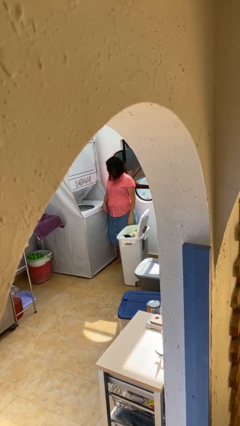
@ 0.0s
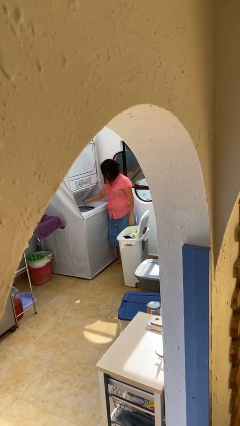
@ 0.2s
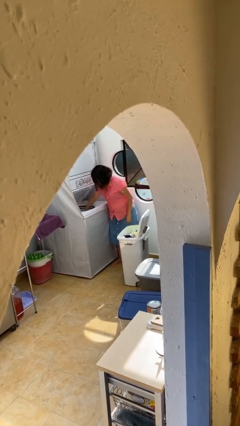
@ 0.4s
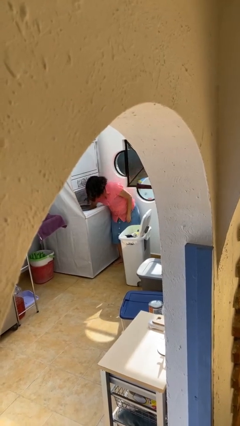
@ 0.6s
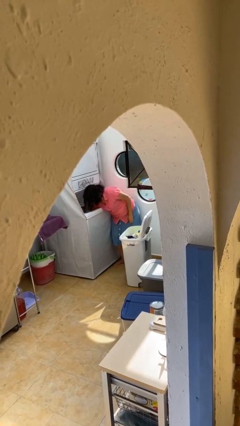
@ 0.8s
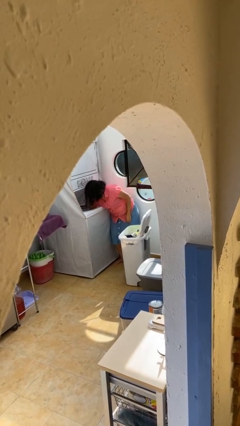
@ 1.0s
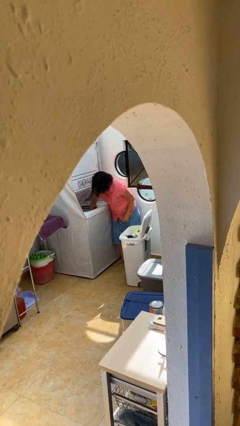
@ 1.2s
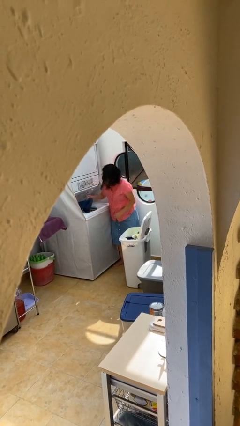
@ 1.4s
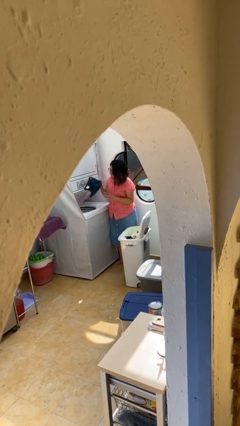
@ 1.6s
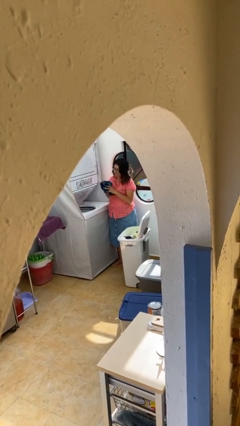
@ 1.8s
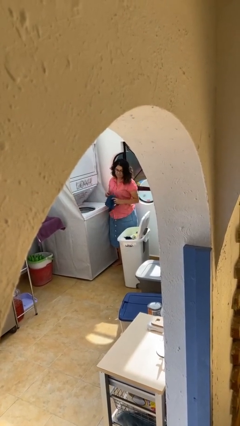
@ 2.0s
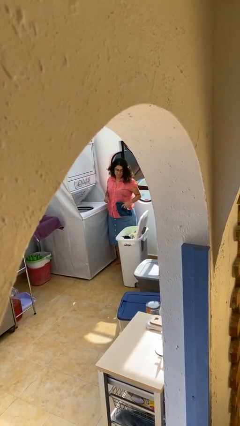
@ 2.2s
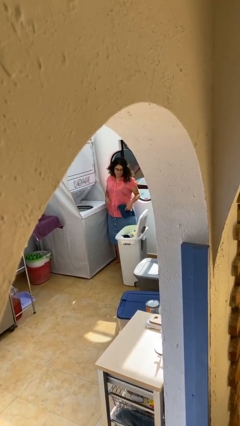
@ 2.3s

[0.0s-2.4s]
person loads clotheswasher

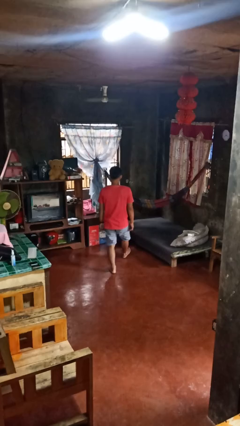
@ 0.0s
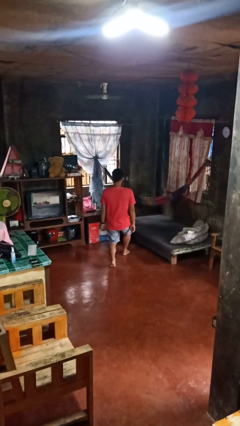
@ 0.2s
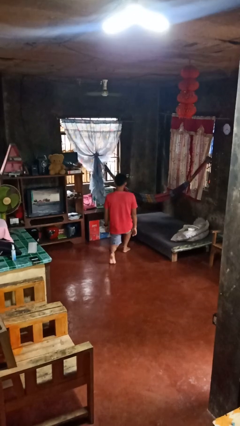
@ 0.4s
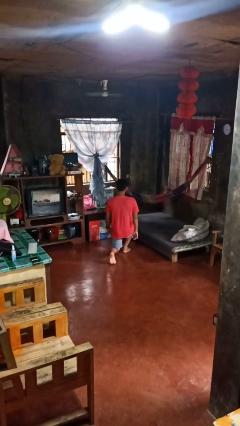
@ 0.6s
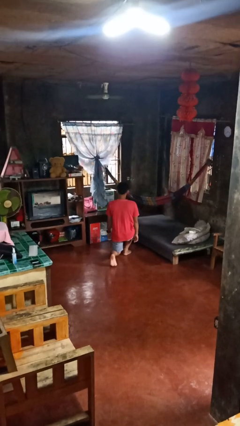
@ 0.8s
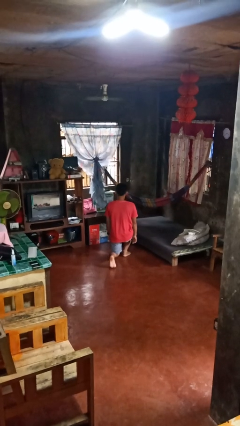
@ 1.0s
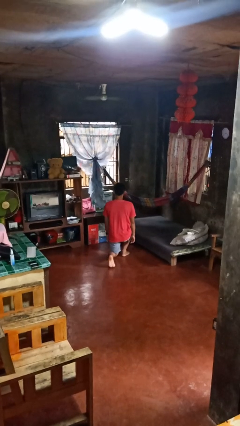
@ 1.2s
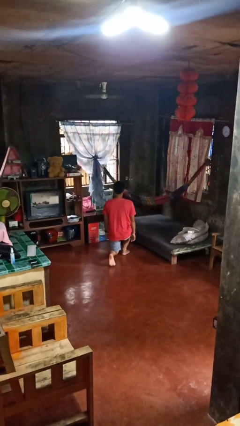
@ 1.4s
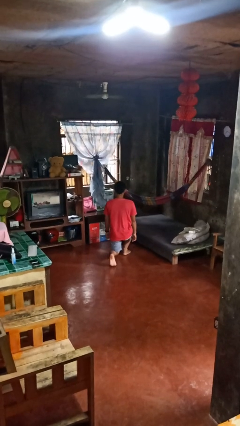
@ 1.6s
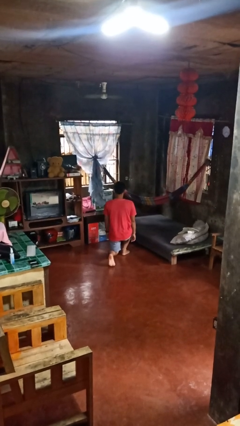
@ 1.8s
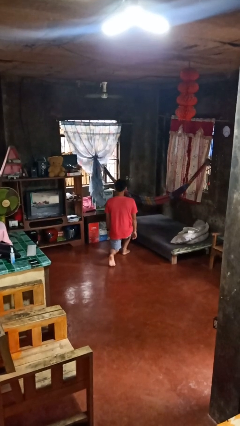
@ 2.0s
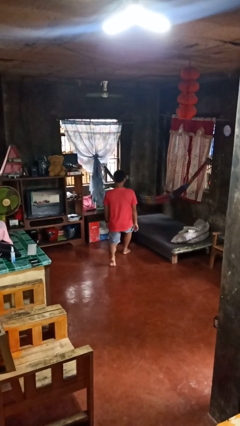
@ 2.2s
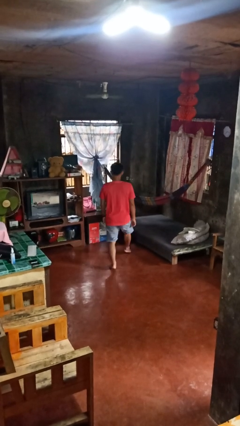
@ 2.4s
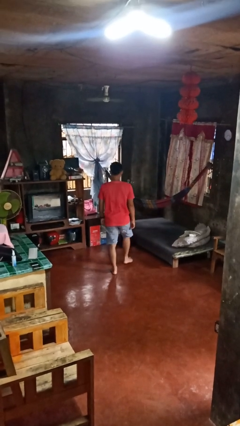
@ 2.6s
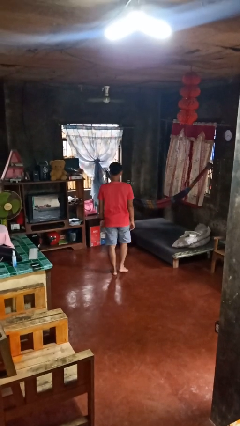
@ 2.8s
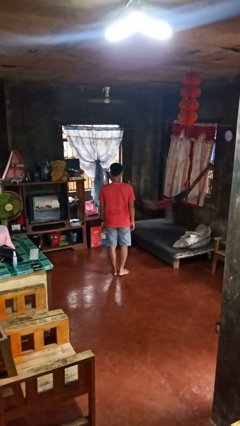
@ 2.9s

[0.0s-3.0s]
person exercises with lunges

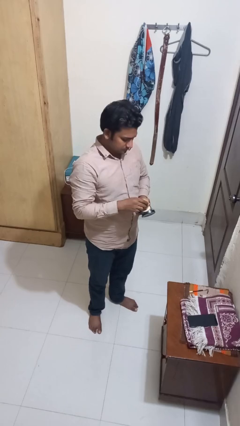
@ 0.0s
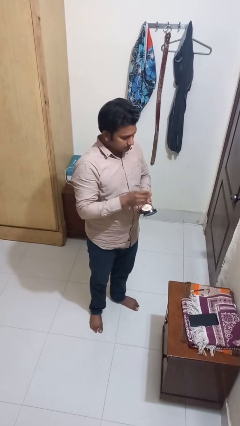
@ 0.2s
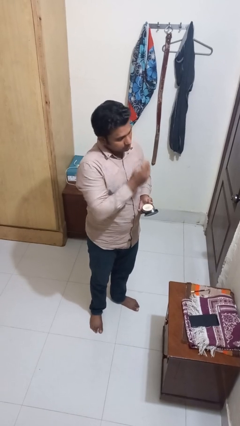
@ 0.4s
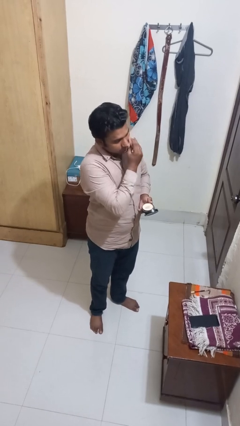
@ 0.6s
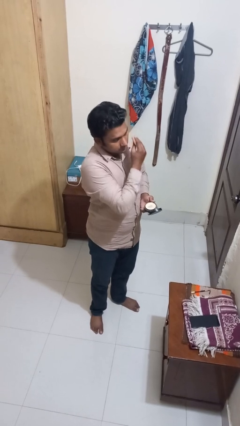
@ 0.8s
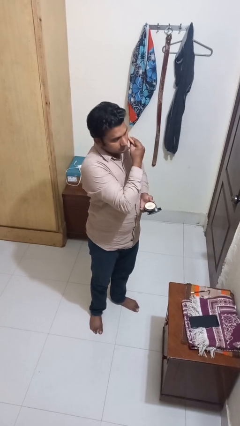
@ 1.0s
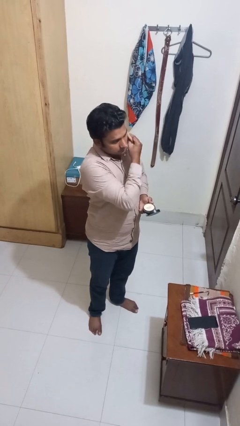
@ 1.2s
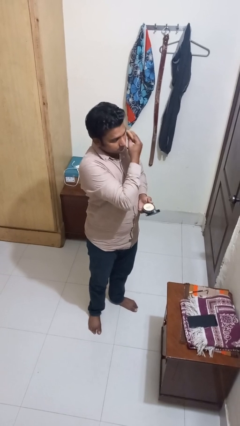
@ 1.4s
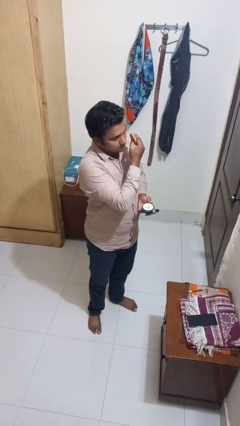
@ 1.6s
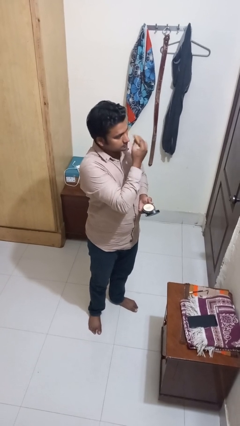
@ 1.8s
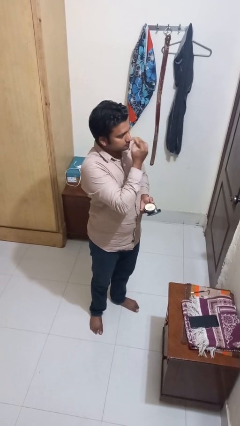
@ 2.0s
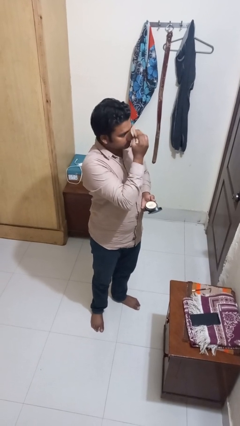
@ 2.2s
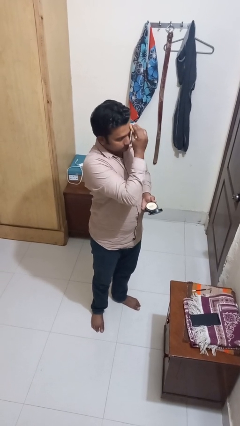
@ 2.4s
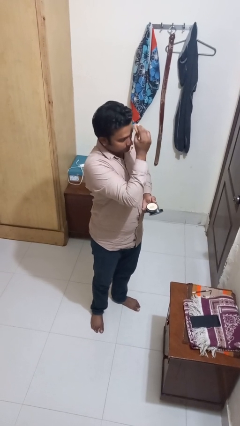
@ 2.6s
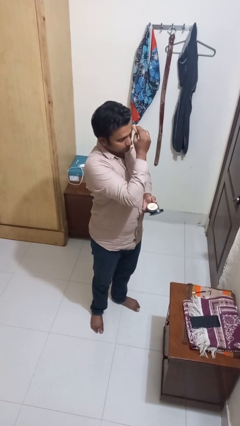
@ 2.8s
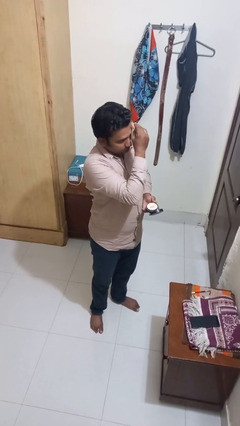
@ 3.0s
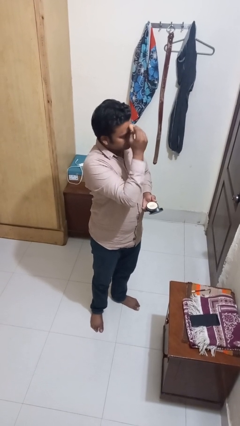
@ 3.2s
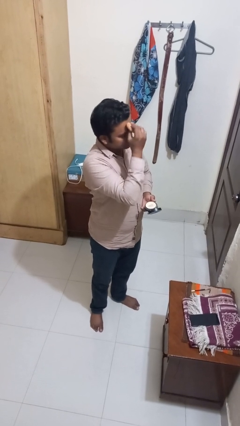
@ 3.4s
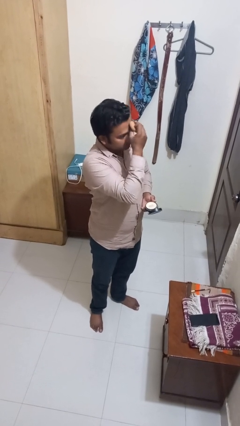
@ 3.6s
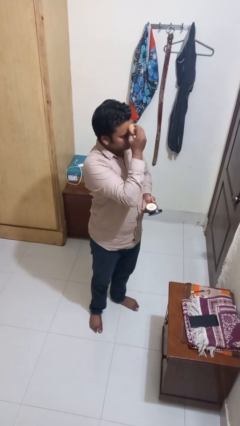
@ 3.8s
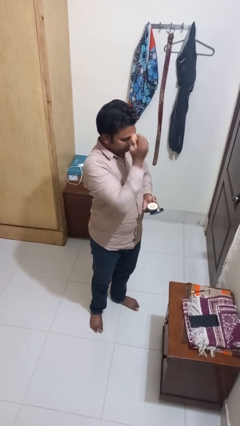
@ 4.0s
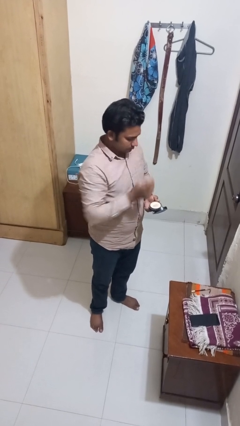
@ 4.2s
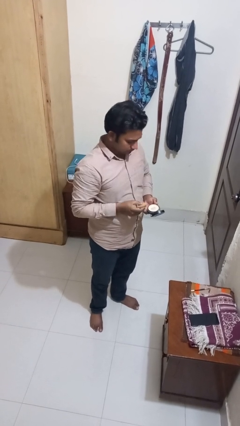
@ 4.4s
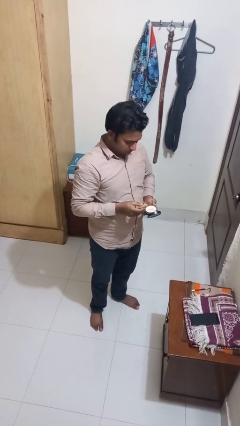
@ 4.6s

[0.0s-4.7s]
person applies foundation makeup

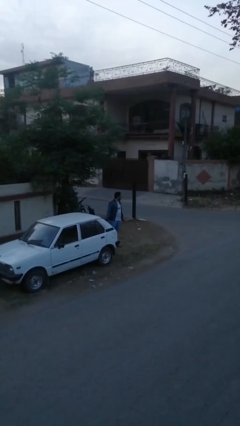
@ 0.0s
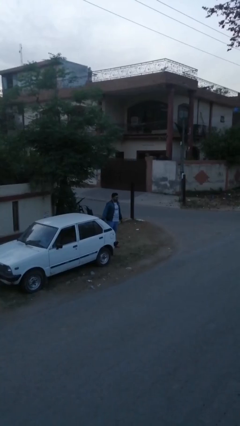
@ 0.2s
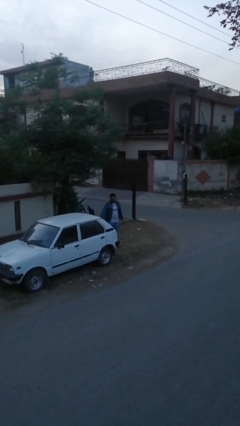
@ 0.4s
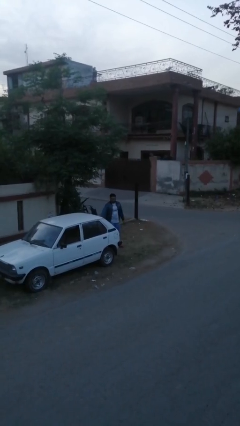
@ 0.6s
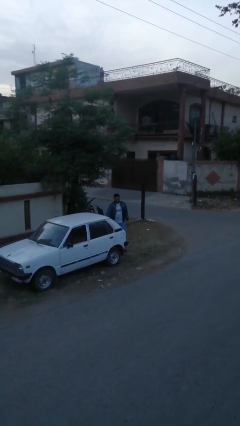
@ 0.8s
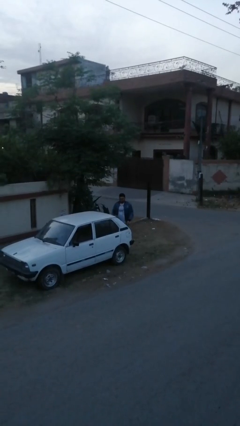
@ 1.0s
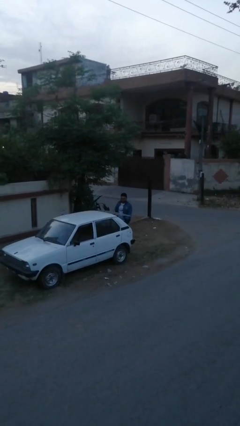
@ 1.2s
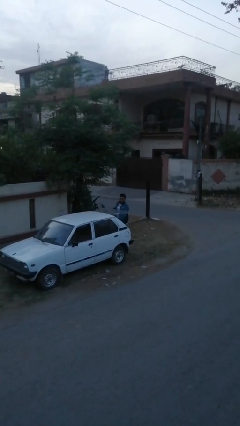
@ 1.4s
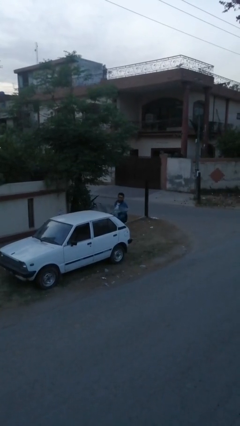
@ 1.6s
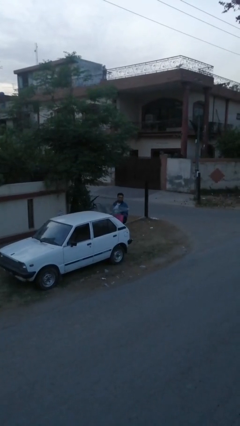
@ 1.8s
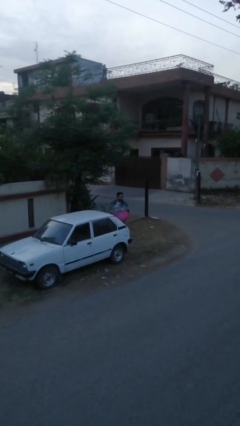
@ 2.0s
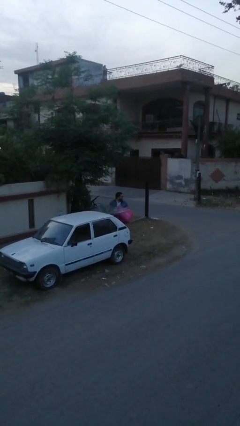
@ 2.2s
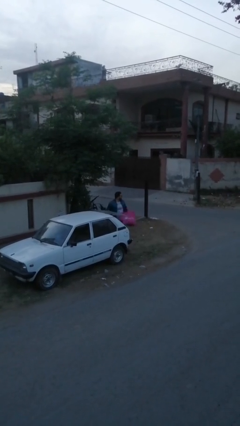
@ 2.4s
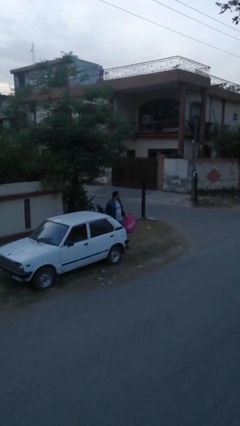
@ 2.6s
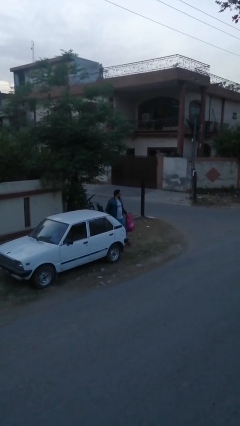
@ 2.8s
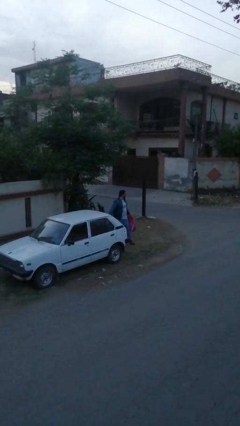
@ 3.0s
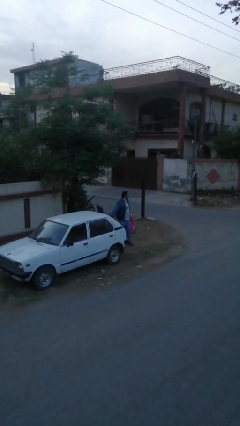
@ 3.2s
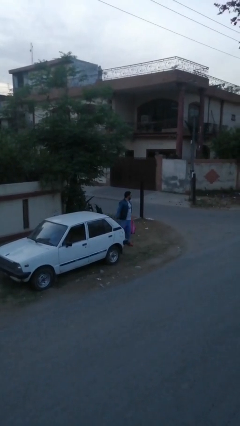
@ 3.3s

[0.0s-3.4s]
person unloads car

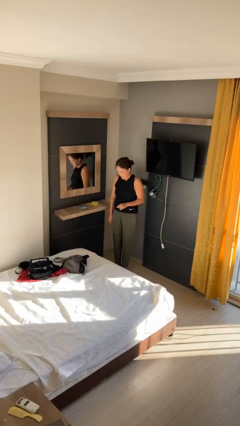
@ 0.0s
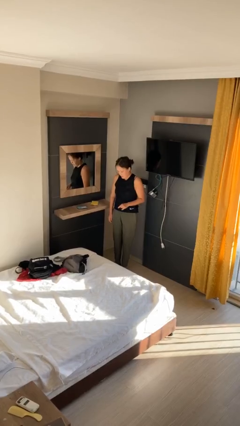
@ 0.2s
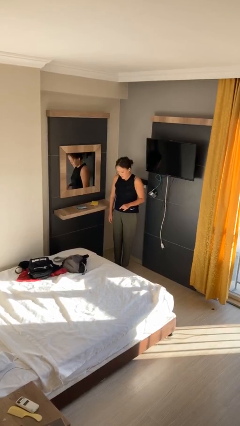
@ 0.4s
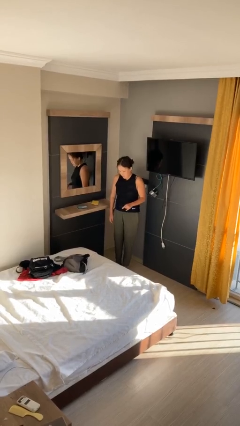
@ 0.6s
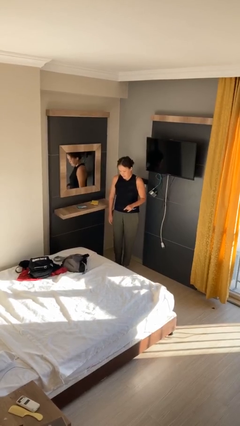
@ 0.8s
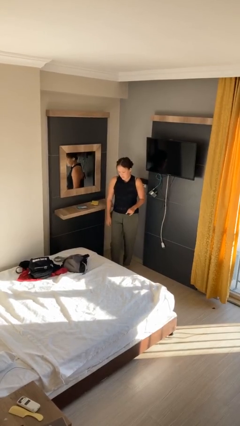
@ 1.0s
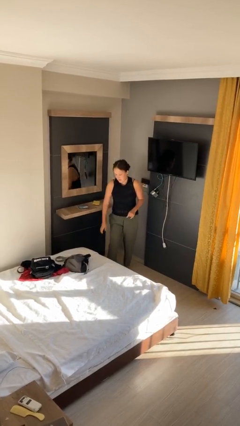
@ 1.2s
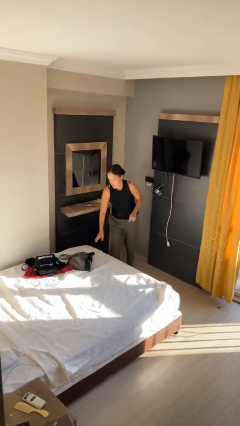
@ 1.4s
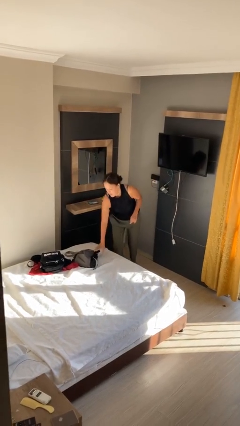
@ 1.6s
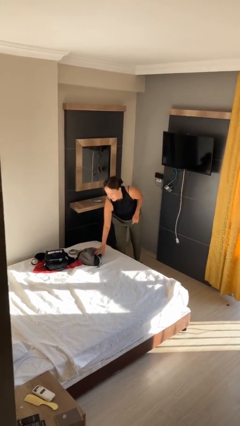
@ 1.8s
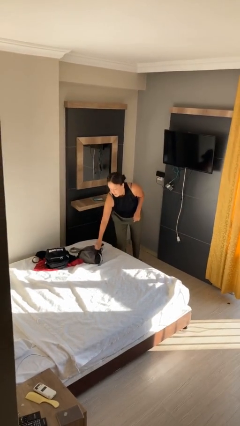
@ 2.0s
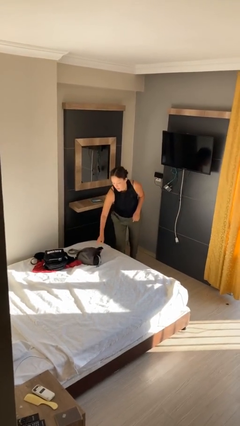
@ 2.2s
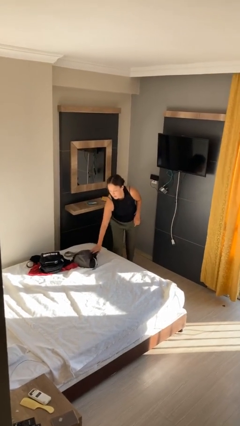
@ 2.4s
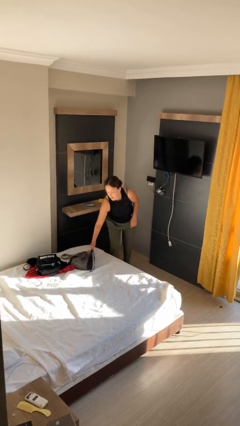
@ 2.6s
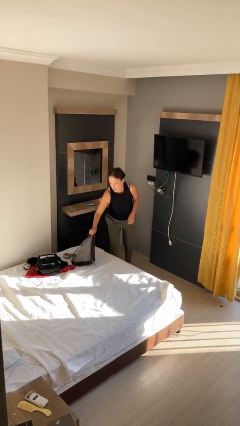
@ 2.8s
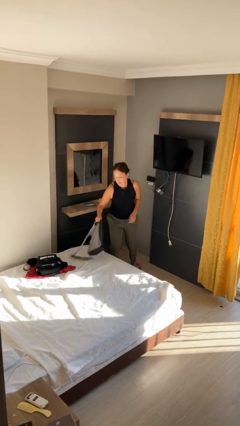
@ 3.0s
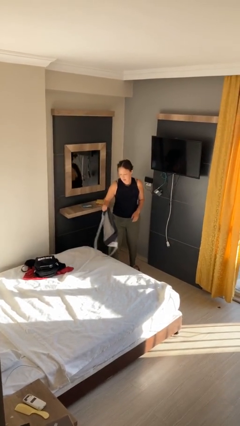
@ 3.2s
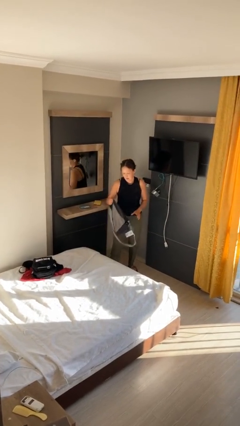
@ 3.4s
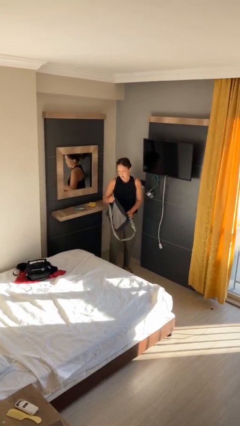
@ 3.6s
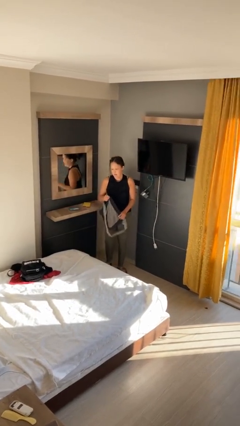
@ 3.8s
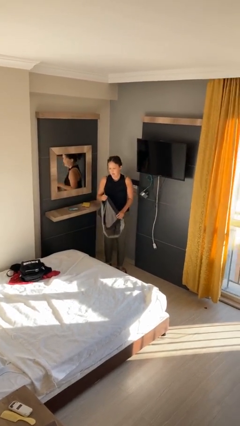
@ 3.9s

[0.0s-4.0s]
person picks up object from bed
